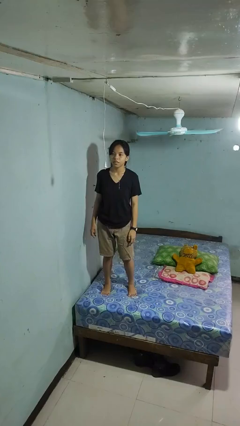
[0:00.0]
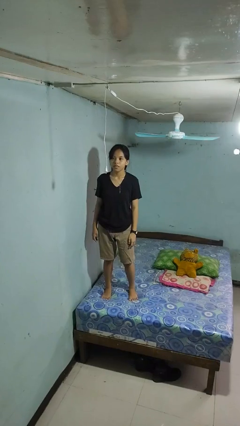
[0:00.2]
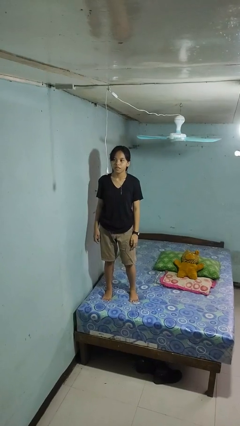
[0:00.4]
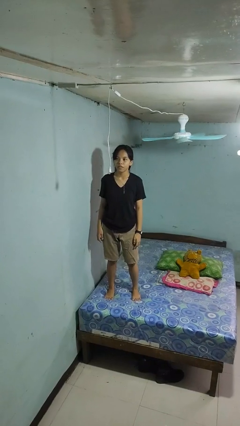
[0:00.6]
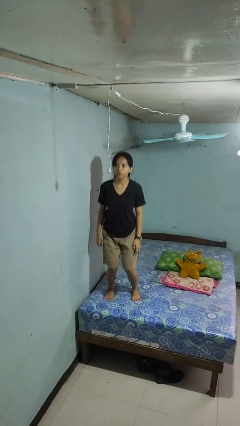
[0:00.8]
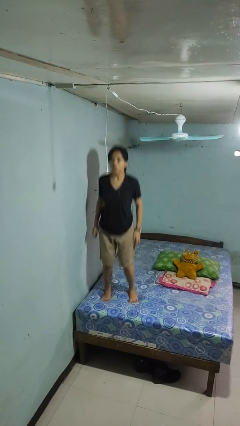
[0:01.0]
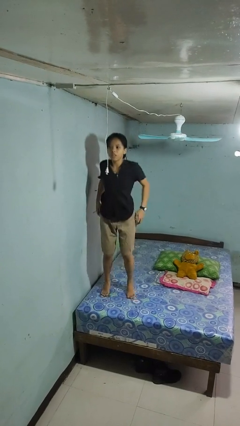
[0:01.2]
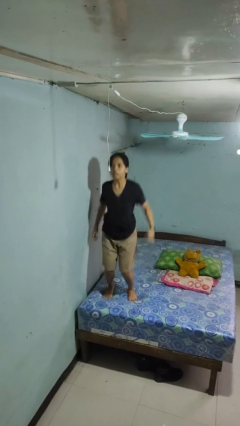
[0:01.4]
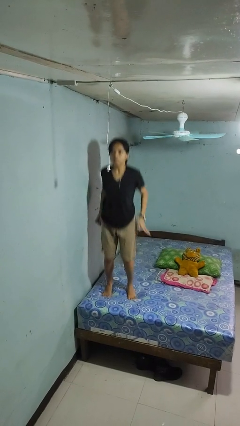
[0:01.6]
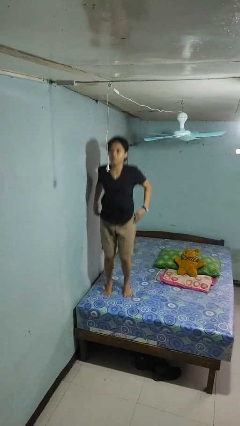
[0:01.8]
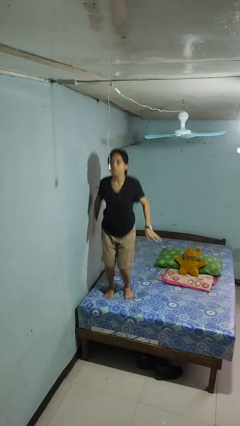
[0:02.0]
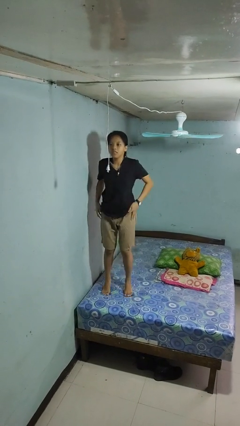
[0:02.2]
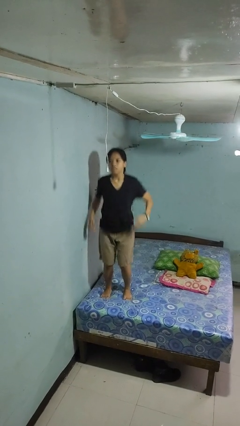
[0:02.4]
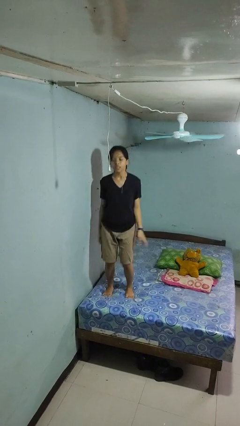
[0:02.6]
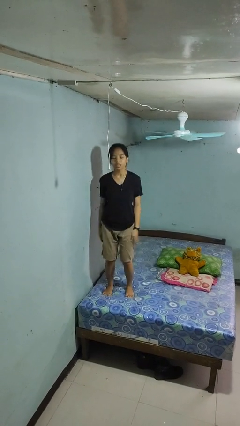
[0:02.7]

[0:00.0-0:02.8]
person jumps on bed

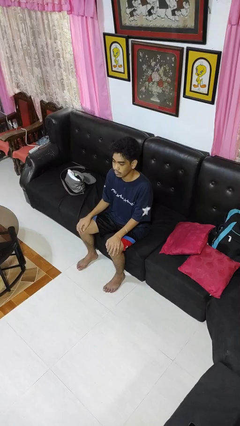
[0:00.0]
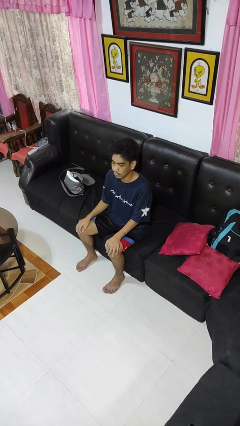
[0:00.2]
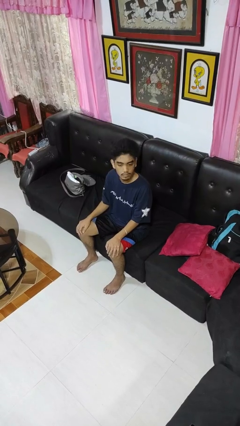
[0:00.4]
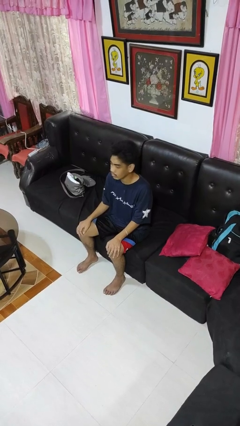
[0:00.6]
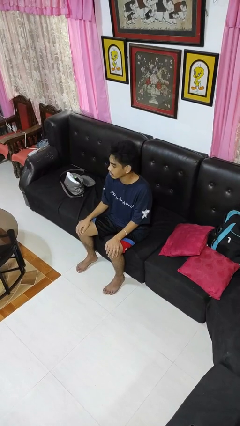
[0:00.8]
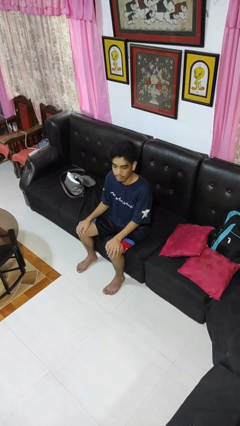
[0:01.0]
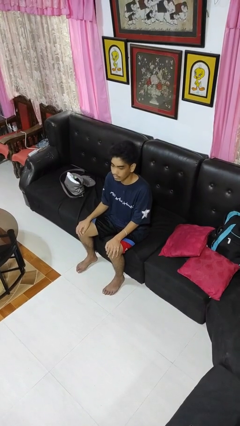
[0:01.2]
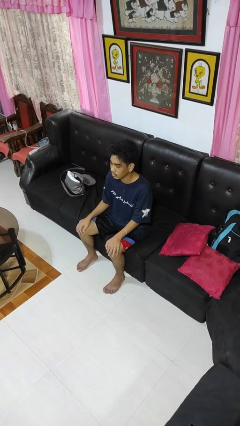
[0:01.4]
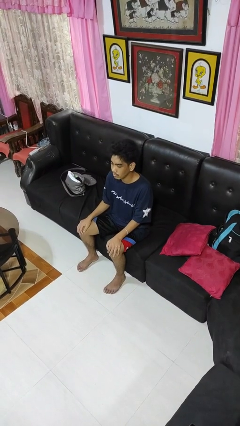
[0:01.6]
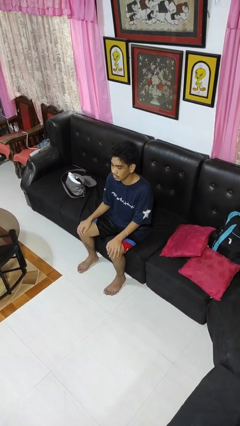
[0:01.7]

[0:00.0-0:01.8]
person shakes head

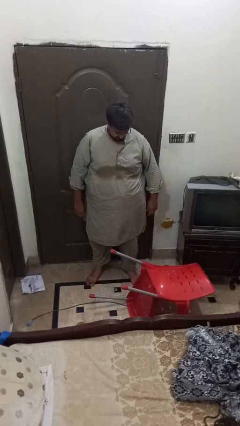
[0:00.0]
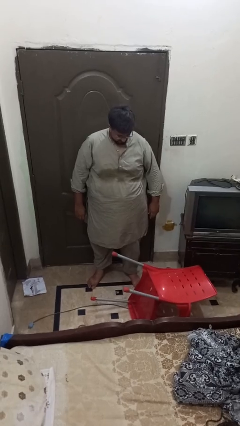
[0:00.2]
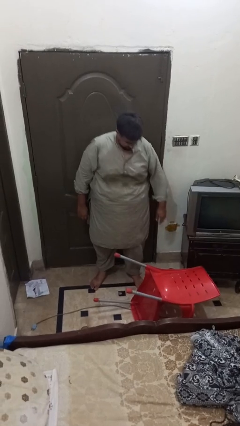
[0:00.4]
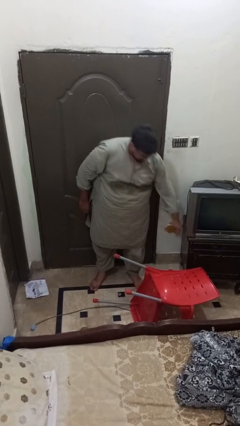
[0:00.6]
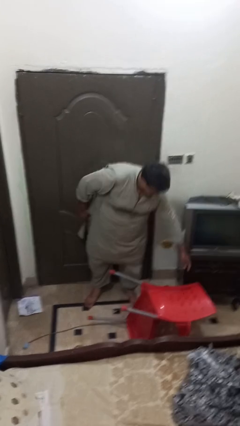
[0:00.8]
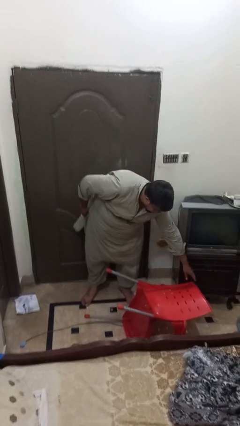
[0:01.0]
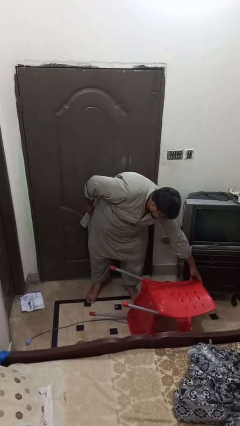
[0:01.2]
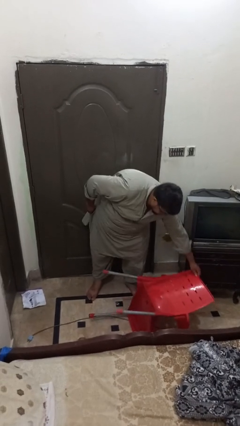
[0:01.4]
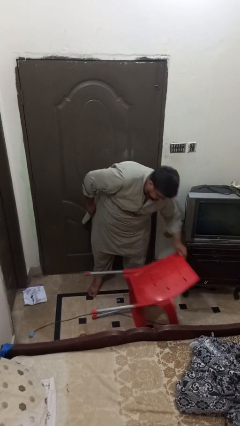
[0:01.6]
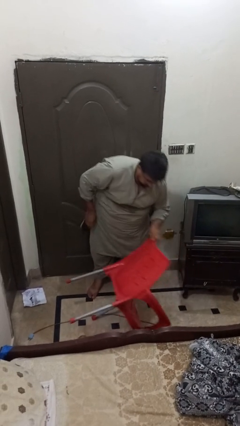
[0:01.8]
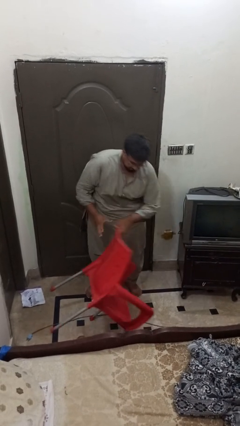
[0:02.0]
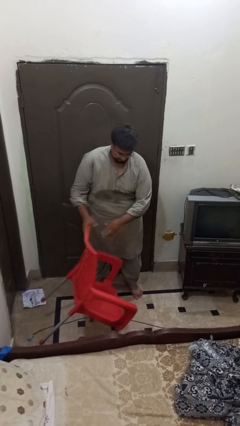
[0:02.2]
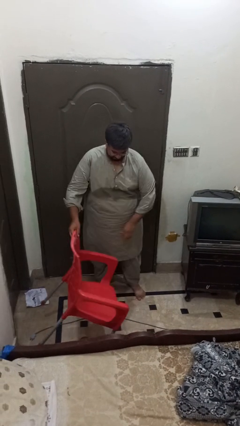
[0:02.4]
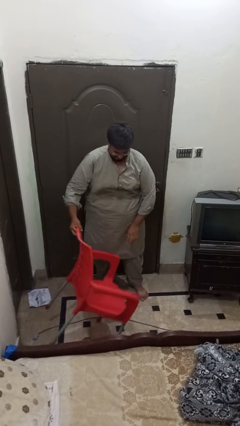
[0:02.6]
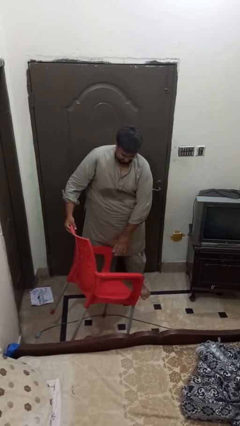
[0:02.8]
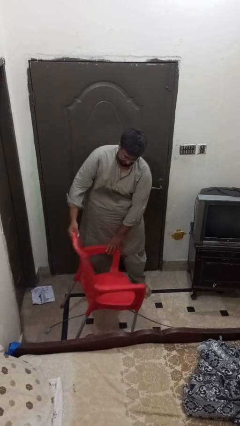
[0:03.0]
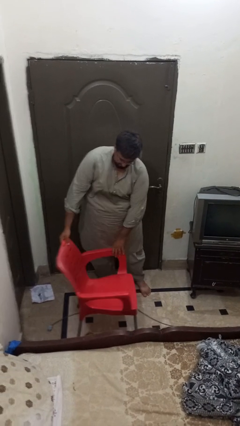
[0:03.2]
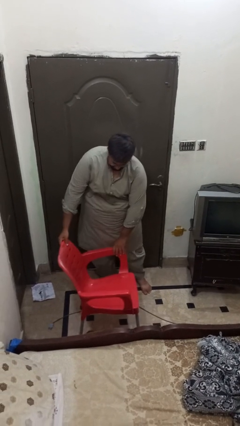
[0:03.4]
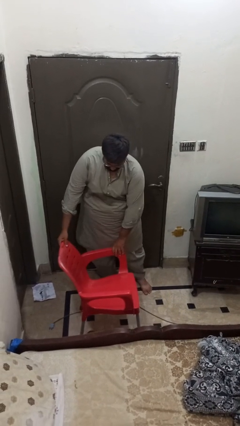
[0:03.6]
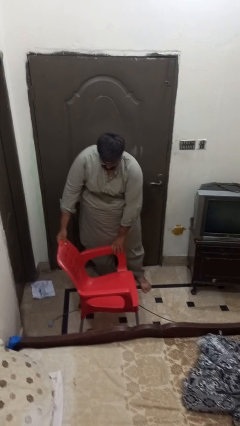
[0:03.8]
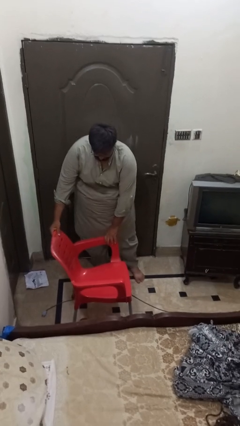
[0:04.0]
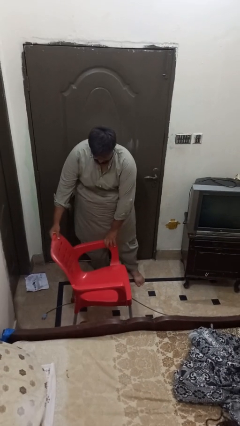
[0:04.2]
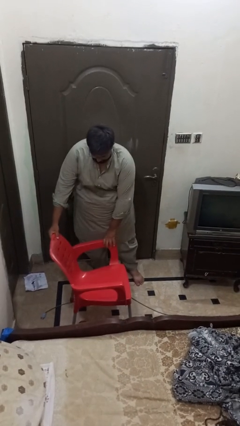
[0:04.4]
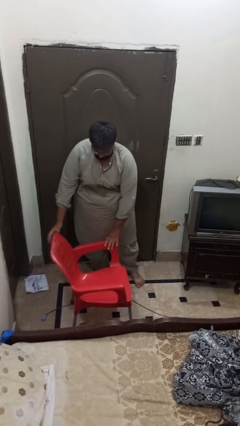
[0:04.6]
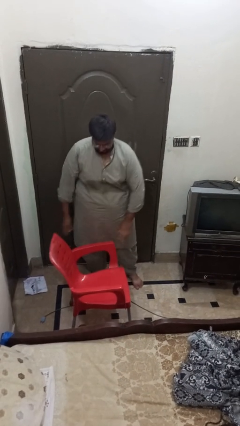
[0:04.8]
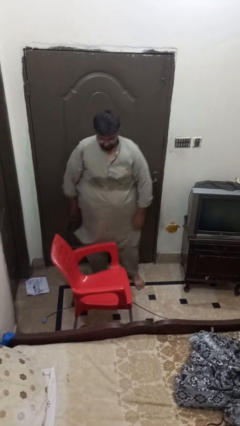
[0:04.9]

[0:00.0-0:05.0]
person sets upright furniture

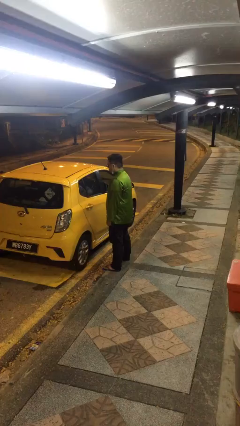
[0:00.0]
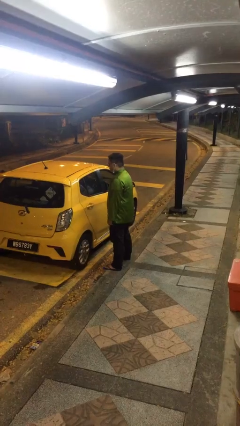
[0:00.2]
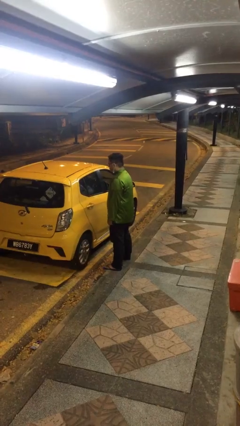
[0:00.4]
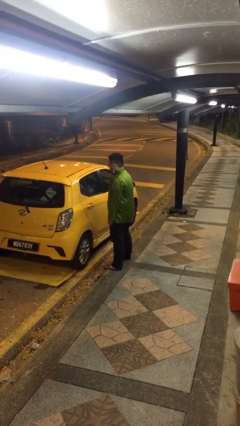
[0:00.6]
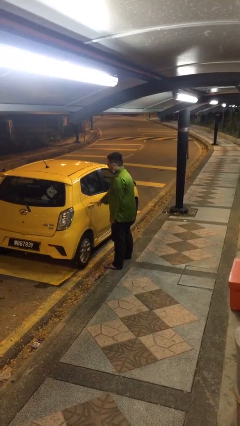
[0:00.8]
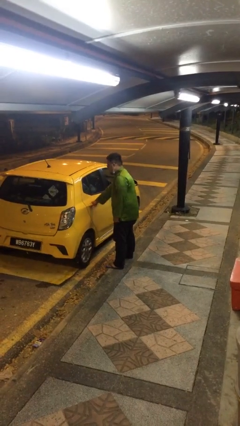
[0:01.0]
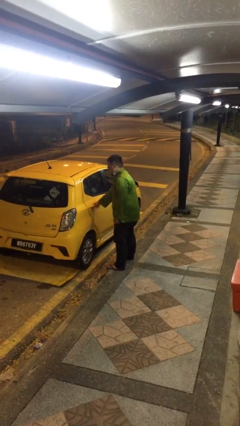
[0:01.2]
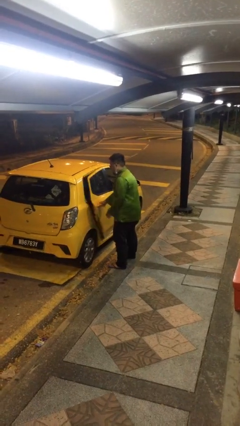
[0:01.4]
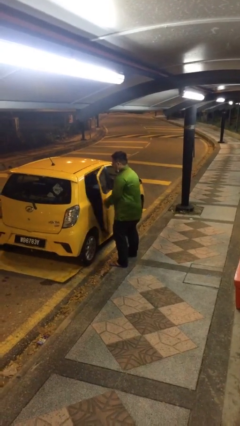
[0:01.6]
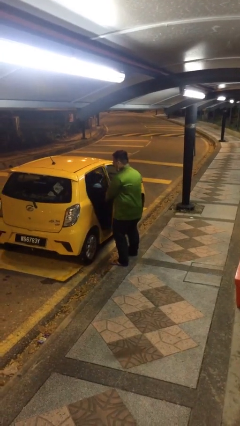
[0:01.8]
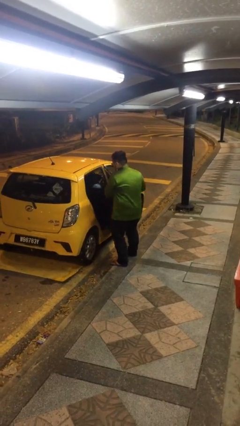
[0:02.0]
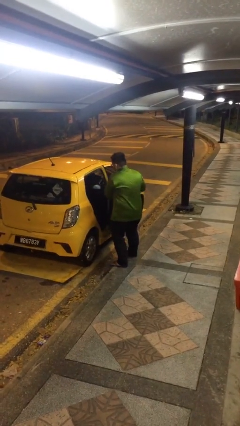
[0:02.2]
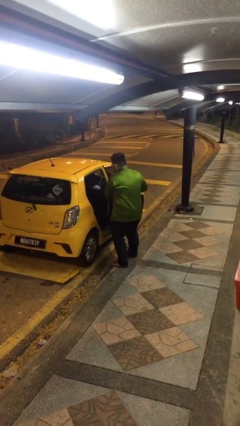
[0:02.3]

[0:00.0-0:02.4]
person opens car door

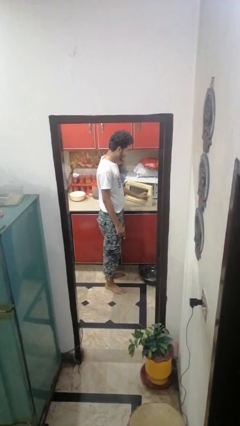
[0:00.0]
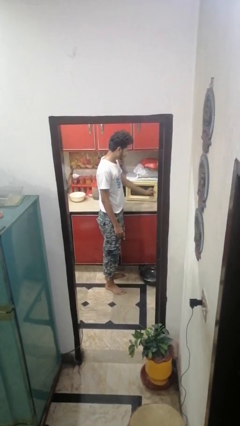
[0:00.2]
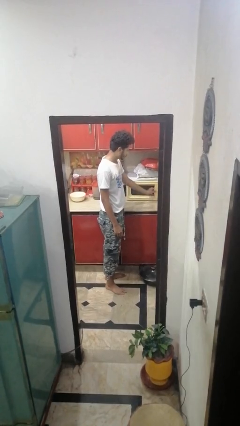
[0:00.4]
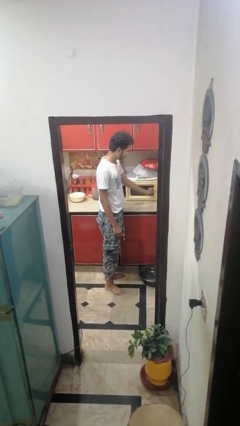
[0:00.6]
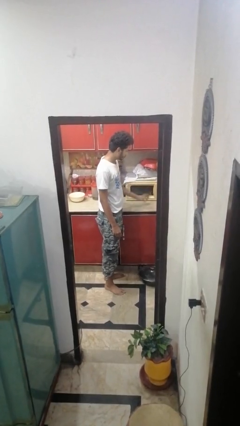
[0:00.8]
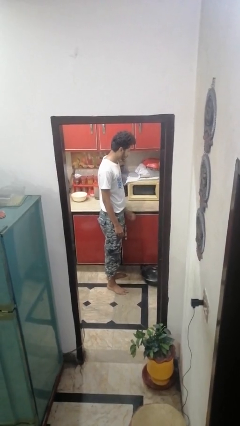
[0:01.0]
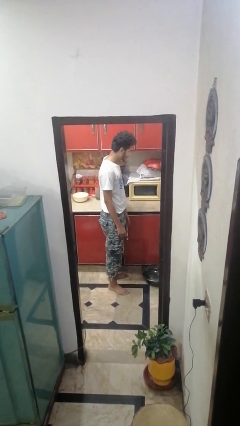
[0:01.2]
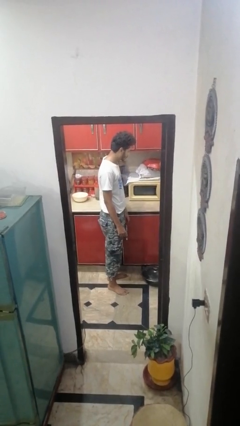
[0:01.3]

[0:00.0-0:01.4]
person closes microwave

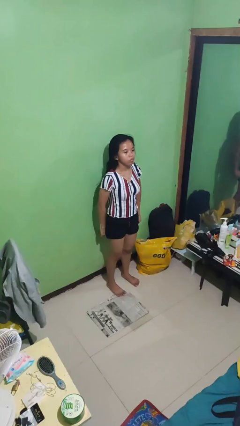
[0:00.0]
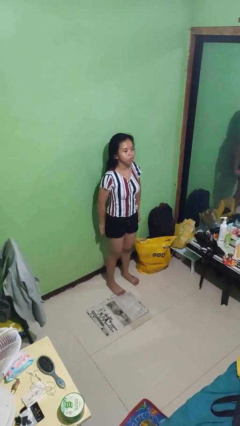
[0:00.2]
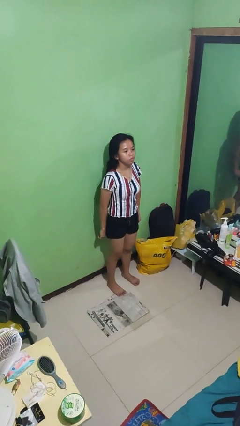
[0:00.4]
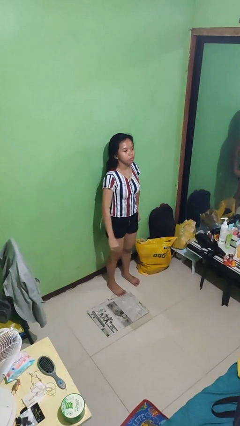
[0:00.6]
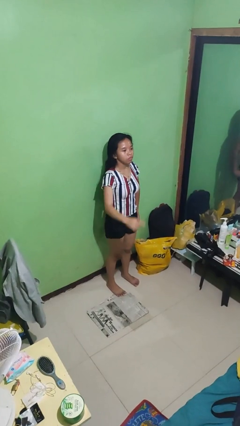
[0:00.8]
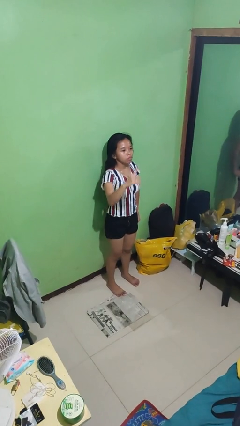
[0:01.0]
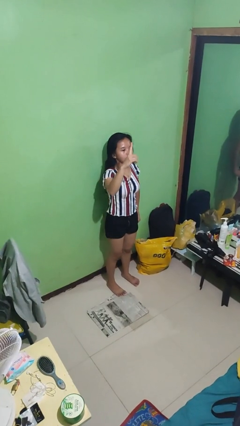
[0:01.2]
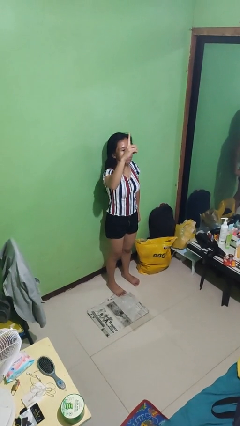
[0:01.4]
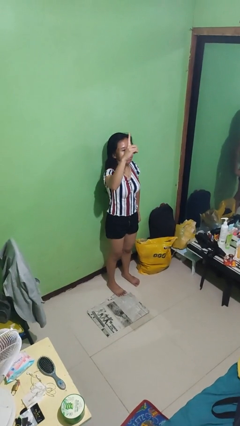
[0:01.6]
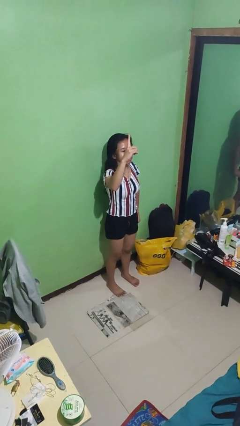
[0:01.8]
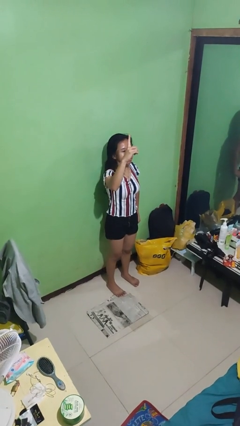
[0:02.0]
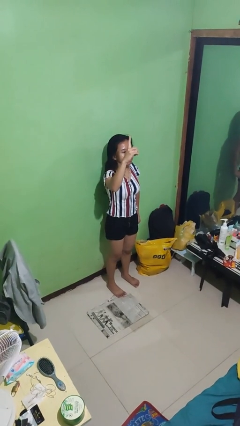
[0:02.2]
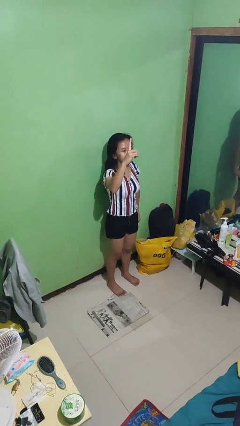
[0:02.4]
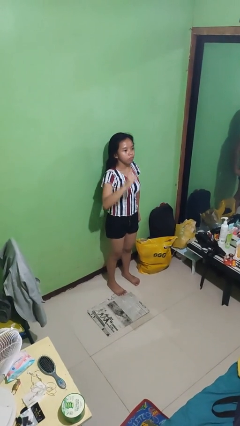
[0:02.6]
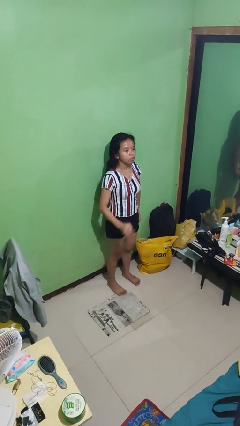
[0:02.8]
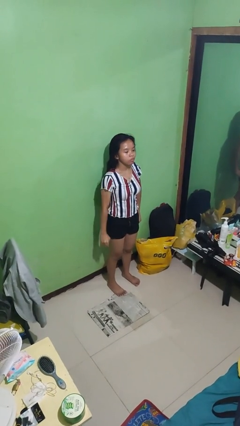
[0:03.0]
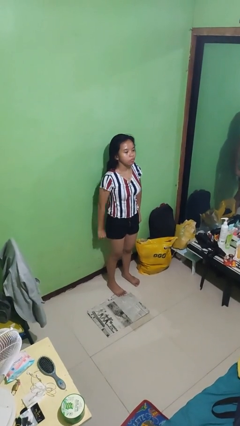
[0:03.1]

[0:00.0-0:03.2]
person gestures number one

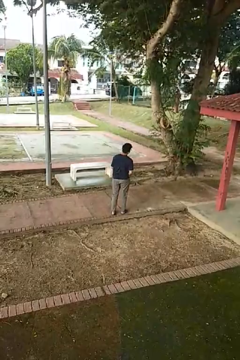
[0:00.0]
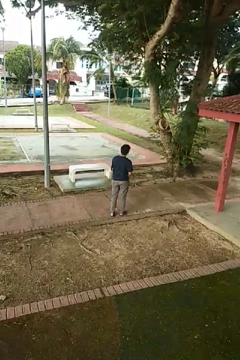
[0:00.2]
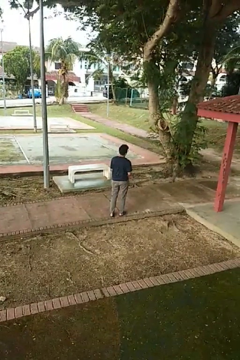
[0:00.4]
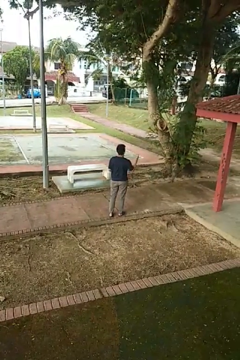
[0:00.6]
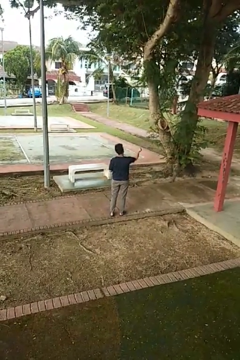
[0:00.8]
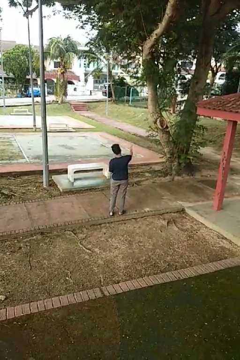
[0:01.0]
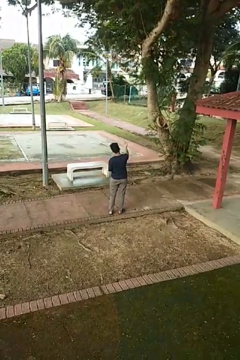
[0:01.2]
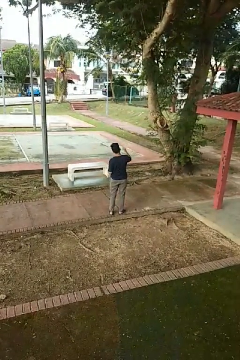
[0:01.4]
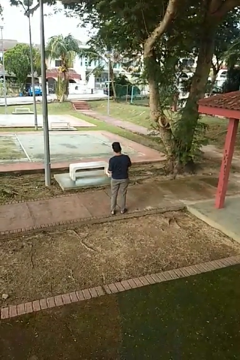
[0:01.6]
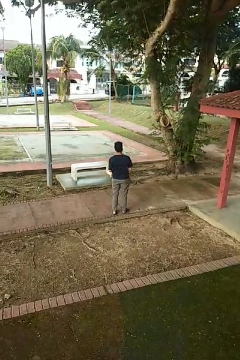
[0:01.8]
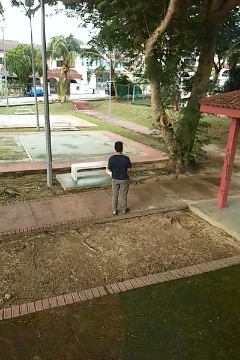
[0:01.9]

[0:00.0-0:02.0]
person karate chop
